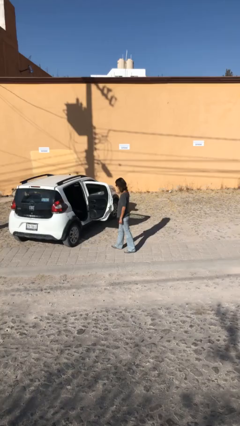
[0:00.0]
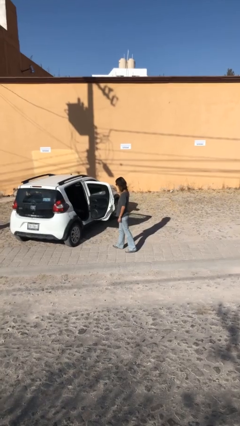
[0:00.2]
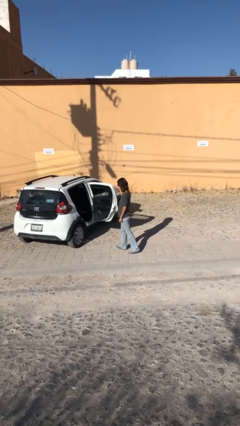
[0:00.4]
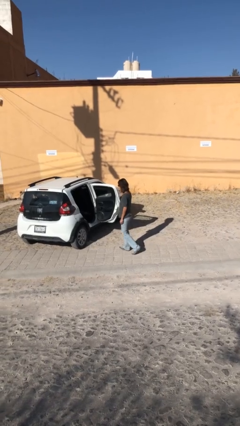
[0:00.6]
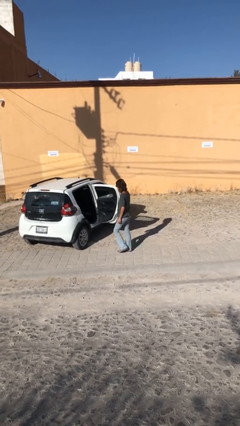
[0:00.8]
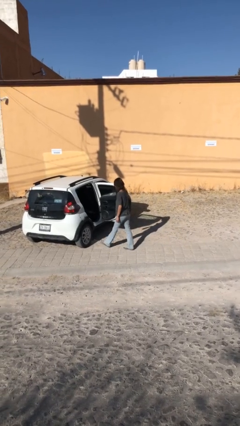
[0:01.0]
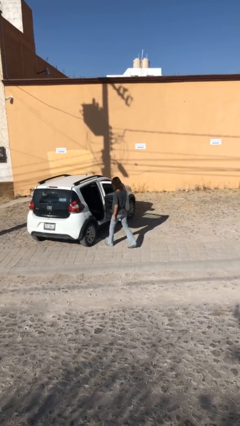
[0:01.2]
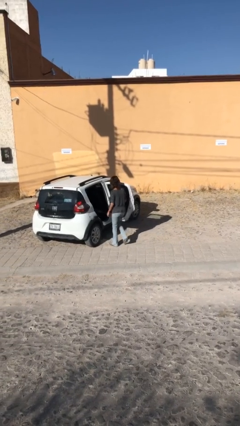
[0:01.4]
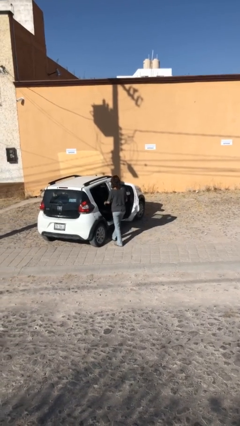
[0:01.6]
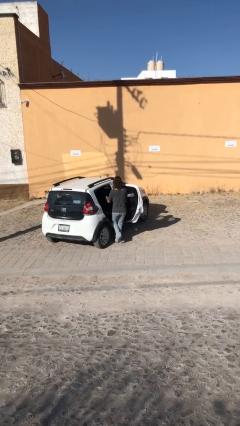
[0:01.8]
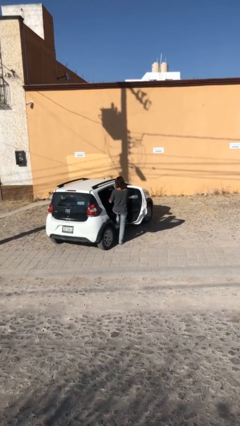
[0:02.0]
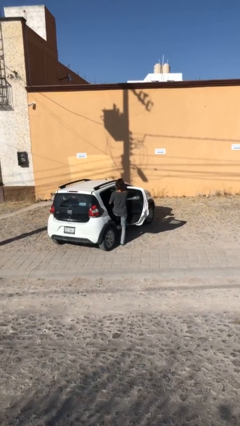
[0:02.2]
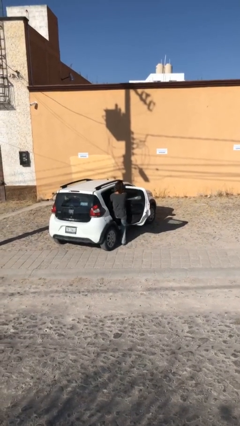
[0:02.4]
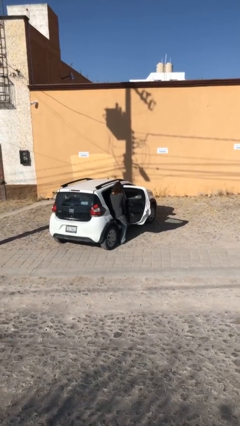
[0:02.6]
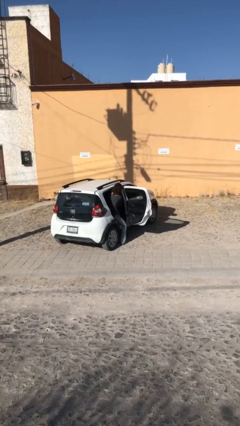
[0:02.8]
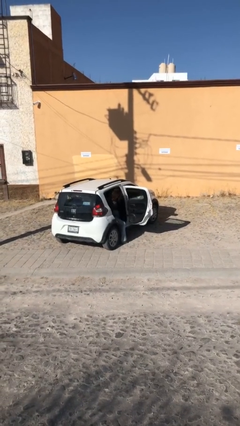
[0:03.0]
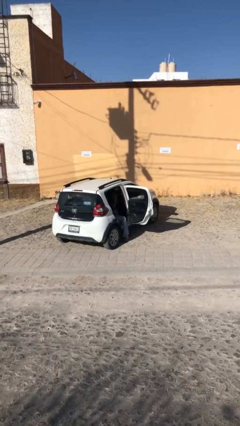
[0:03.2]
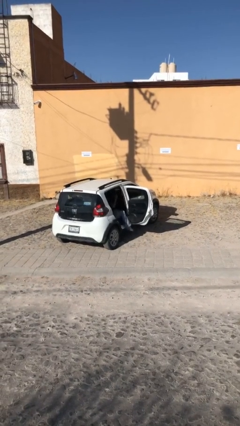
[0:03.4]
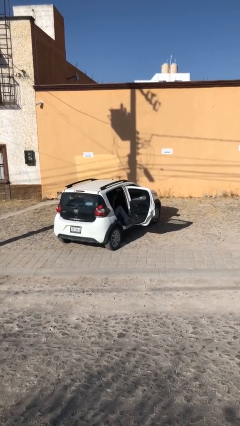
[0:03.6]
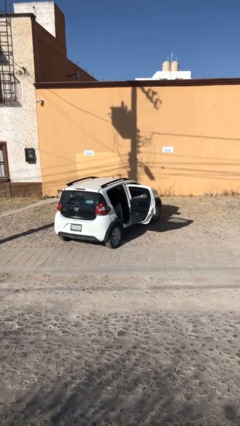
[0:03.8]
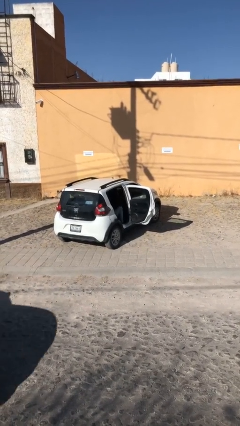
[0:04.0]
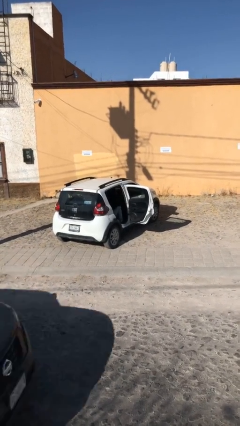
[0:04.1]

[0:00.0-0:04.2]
person enters car

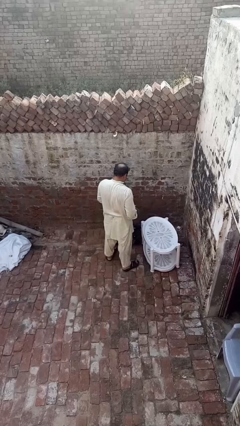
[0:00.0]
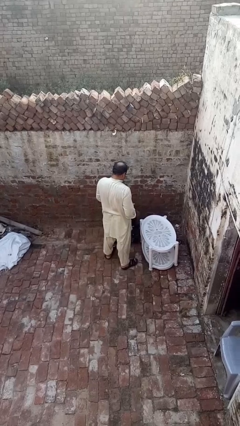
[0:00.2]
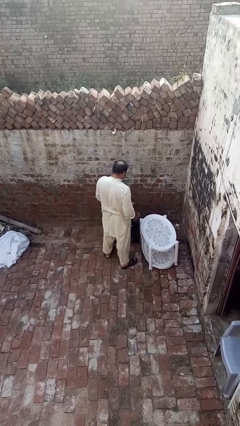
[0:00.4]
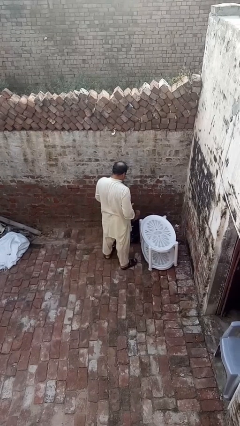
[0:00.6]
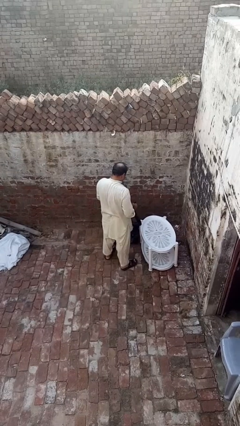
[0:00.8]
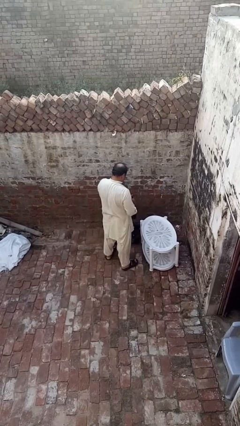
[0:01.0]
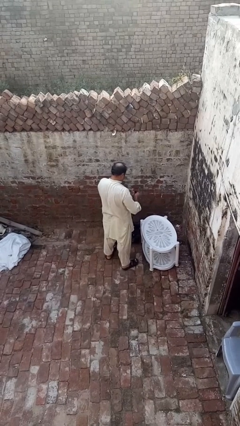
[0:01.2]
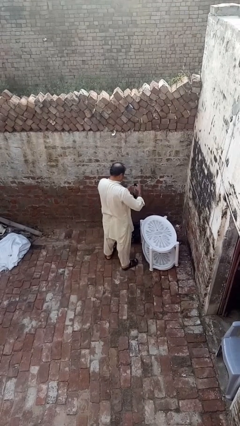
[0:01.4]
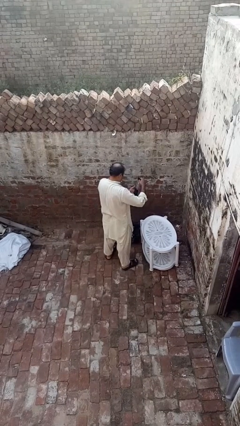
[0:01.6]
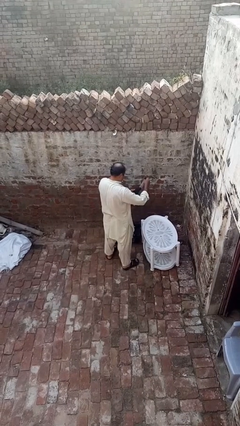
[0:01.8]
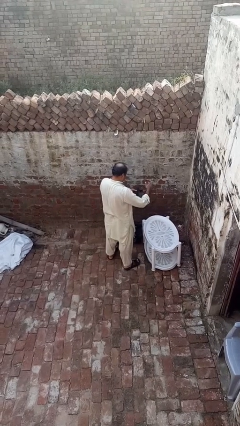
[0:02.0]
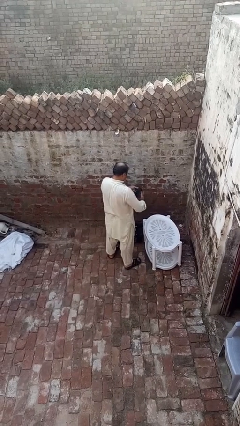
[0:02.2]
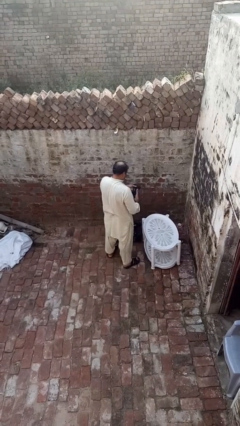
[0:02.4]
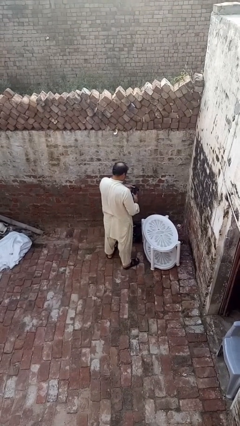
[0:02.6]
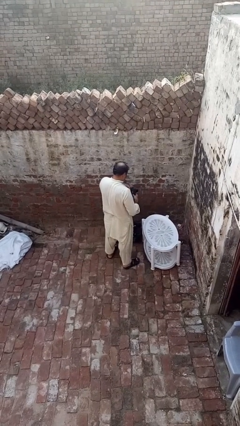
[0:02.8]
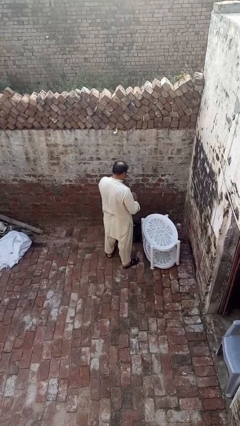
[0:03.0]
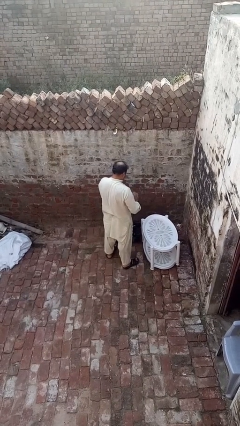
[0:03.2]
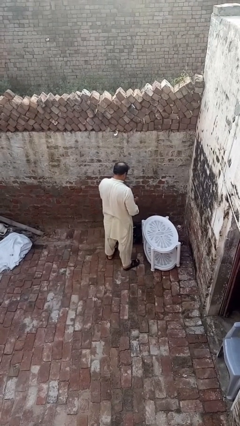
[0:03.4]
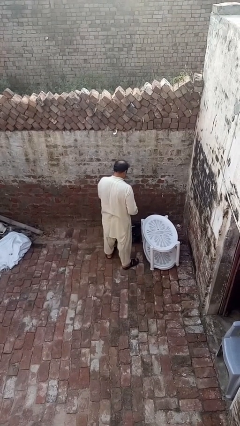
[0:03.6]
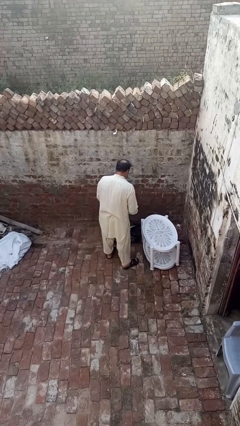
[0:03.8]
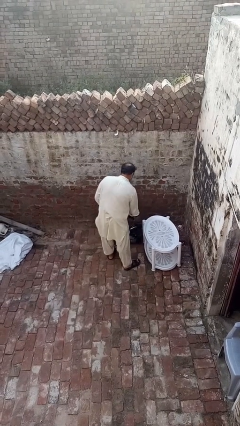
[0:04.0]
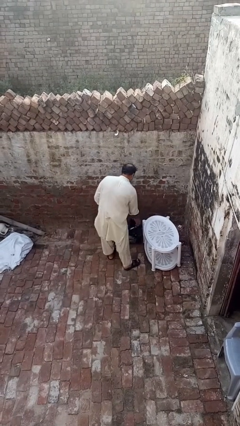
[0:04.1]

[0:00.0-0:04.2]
person folds socks

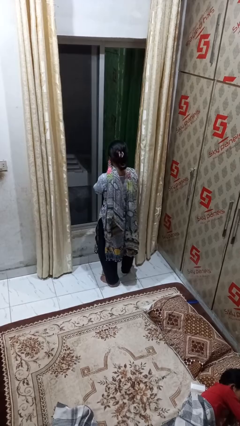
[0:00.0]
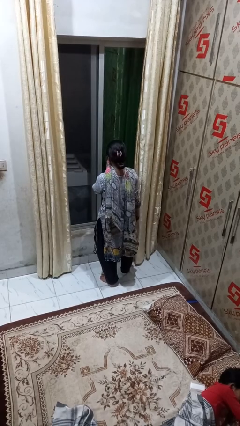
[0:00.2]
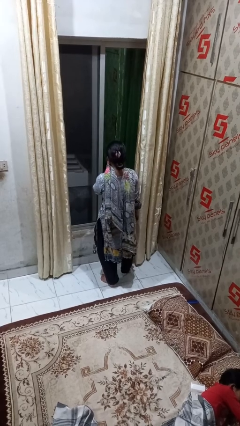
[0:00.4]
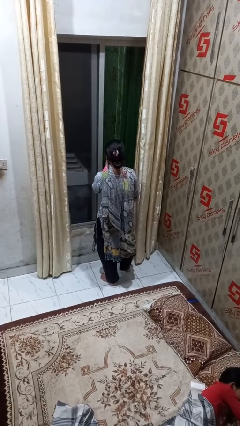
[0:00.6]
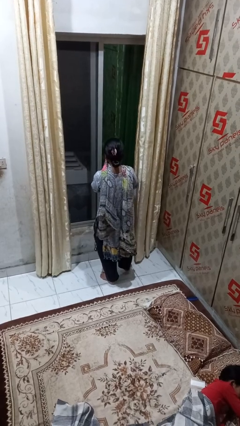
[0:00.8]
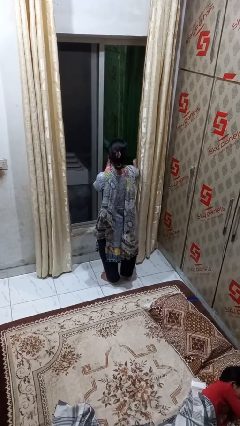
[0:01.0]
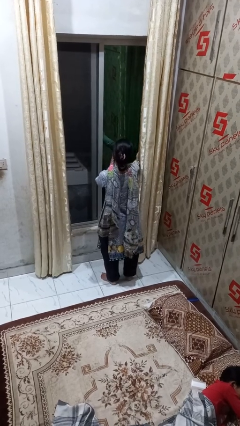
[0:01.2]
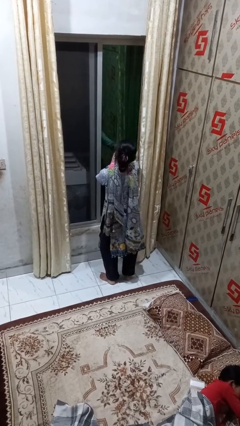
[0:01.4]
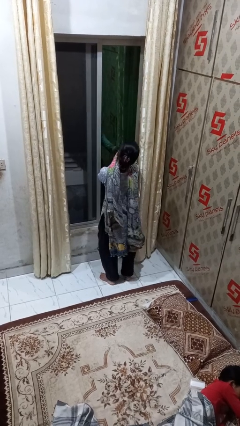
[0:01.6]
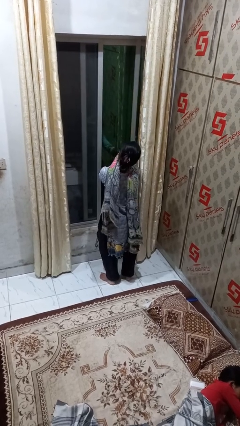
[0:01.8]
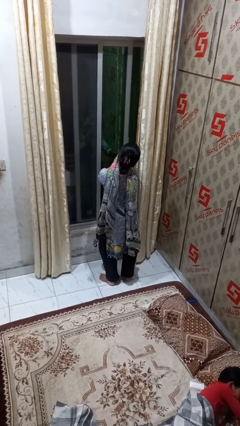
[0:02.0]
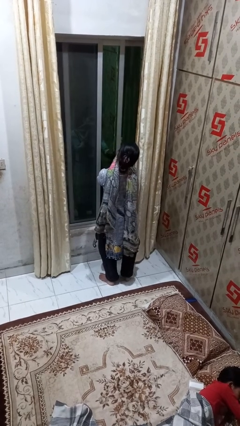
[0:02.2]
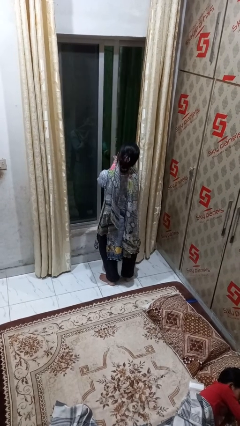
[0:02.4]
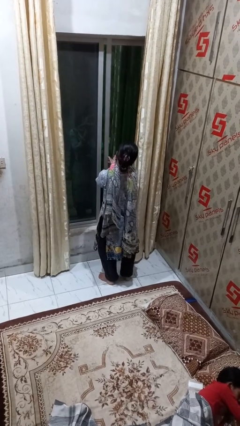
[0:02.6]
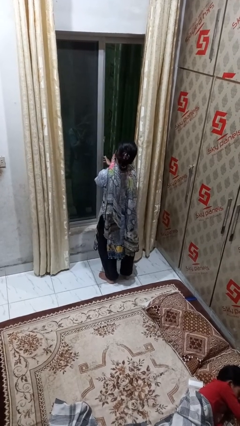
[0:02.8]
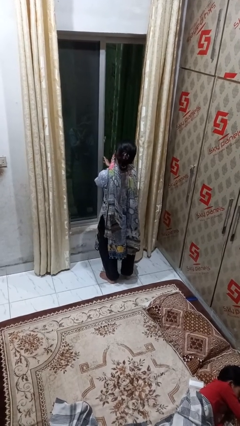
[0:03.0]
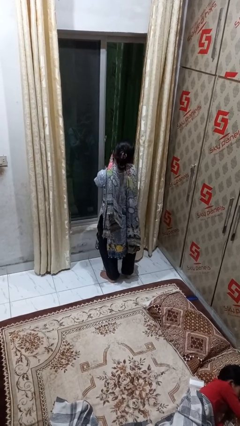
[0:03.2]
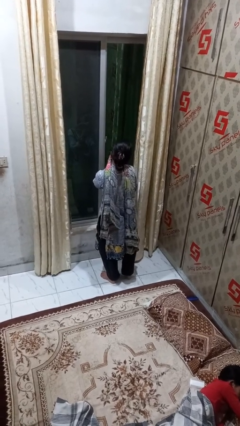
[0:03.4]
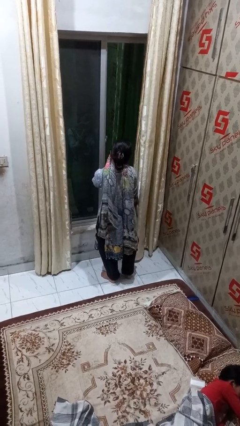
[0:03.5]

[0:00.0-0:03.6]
person closes home window

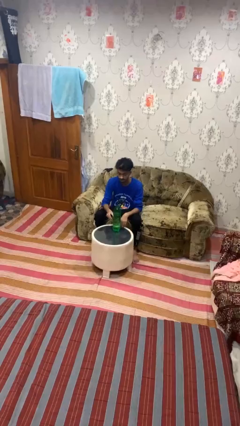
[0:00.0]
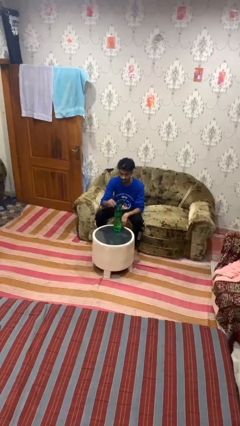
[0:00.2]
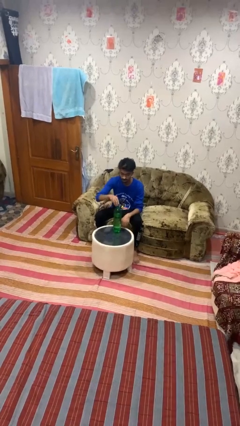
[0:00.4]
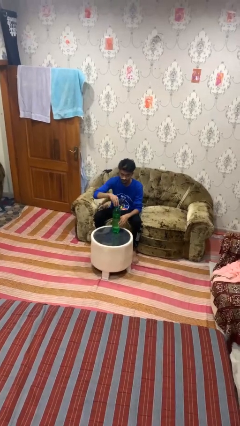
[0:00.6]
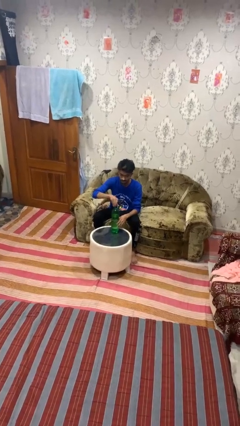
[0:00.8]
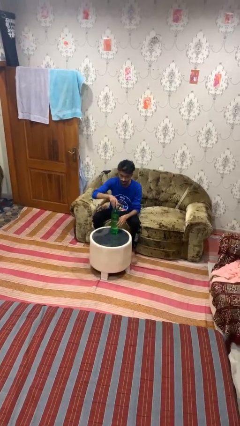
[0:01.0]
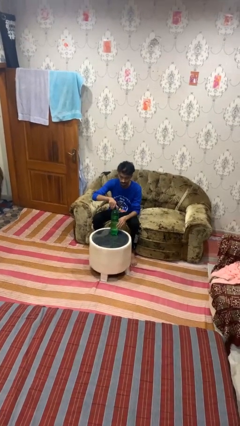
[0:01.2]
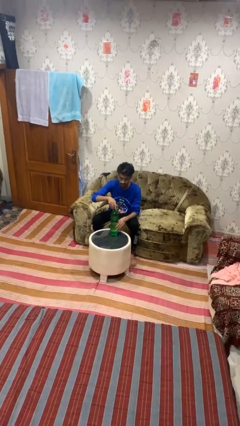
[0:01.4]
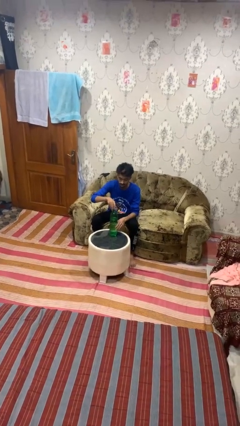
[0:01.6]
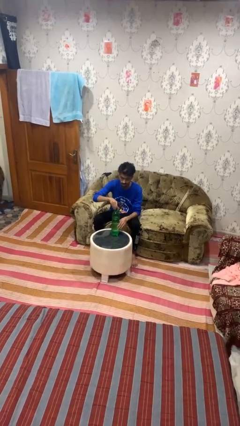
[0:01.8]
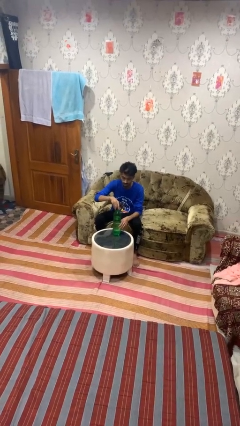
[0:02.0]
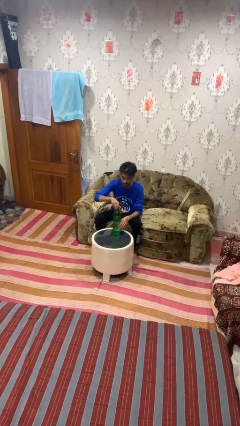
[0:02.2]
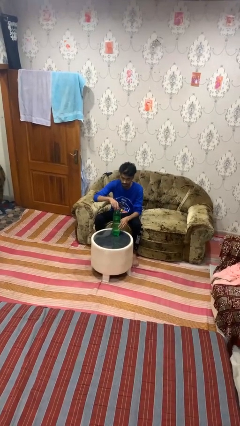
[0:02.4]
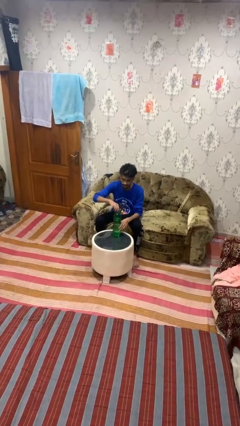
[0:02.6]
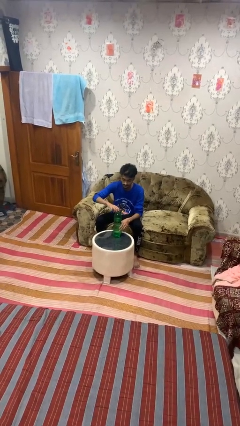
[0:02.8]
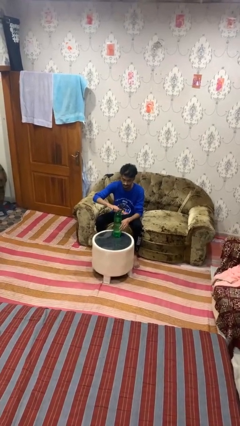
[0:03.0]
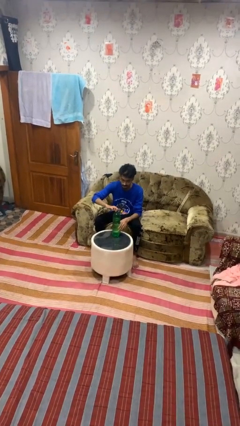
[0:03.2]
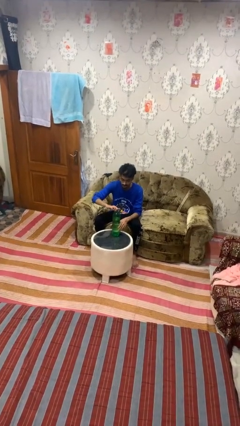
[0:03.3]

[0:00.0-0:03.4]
person screws lid to bottle

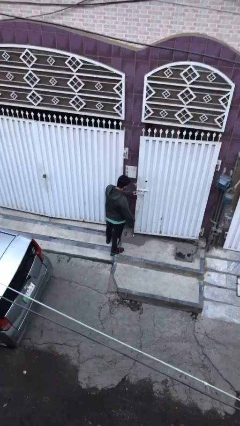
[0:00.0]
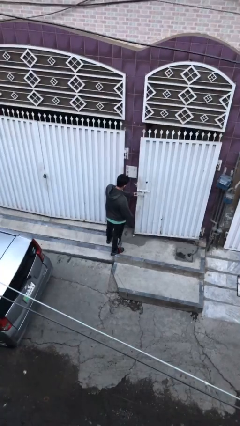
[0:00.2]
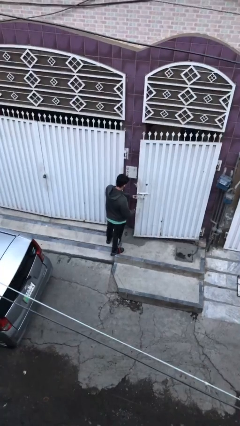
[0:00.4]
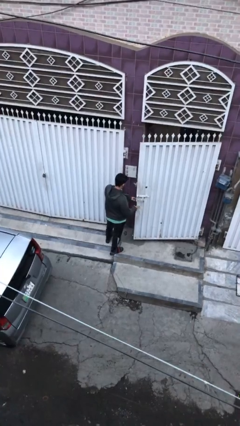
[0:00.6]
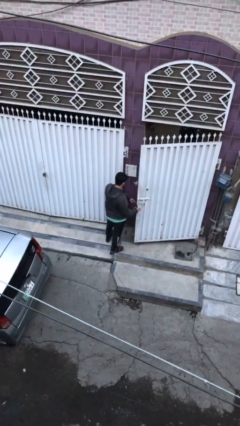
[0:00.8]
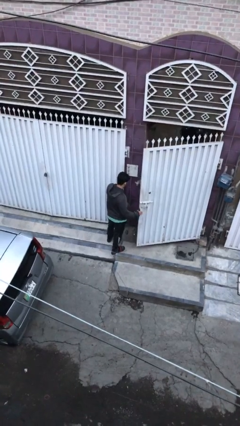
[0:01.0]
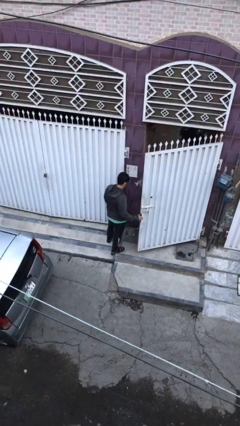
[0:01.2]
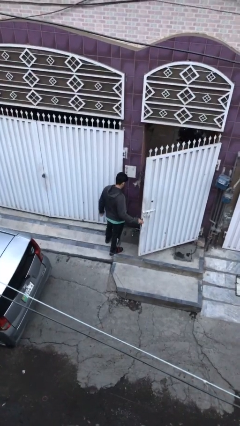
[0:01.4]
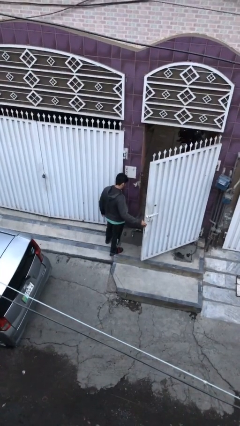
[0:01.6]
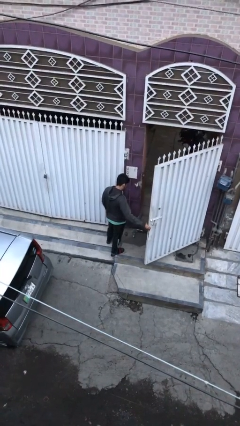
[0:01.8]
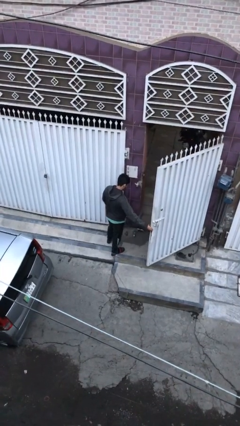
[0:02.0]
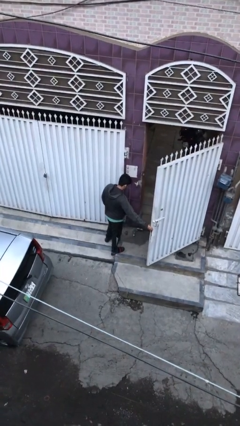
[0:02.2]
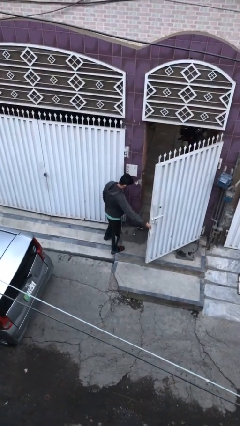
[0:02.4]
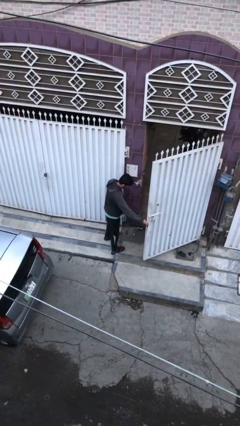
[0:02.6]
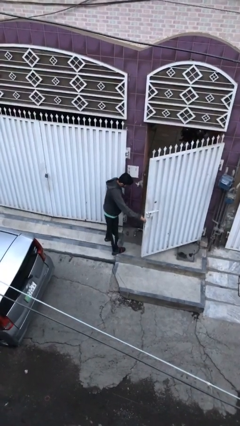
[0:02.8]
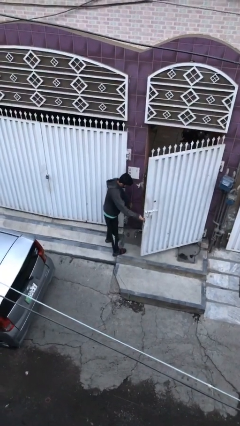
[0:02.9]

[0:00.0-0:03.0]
person opens facility door
